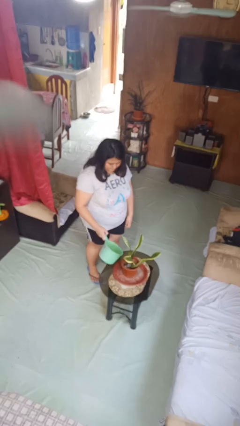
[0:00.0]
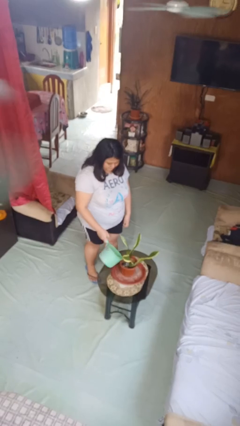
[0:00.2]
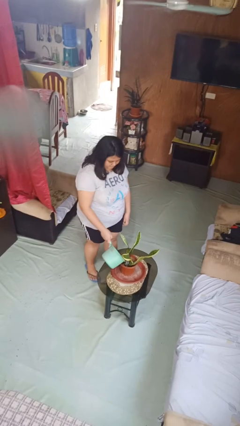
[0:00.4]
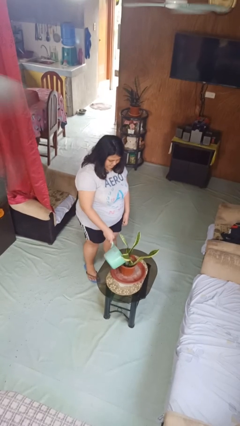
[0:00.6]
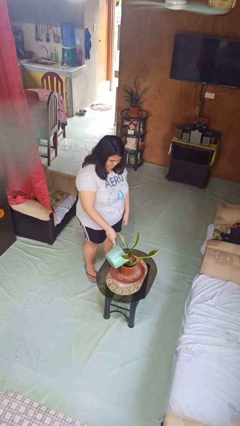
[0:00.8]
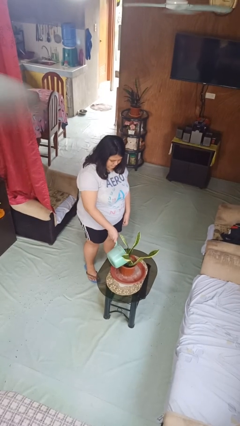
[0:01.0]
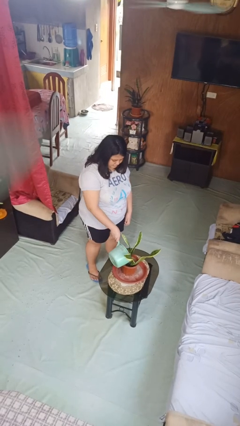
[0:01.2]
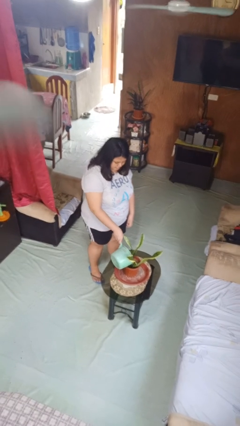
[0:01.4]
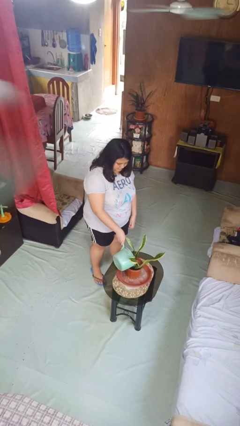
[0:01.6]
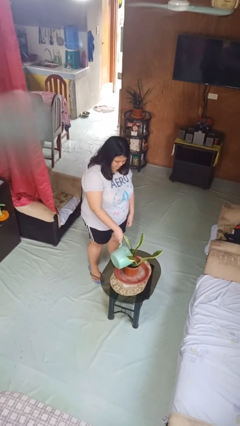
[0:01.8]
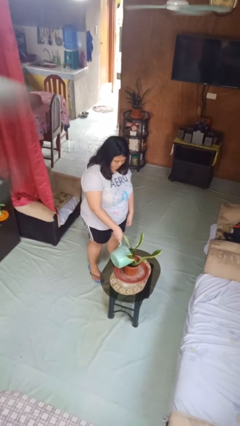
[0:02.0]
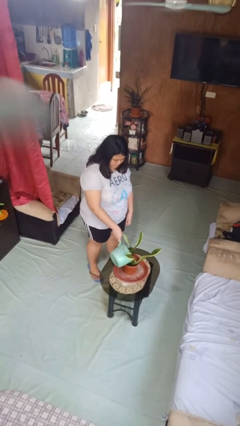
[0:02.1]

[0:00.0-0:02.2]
person waters houseplant

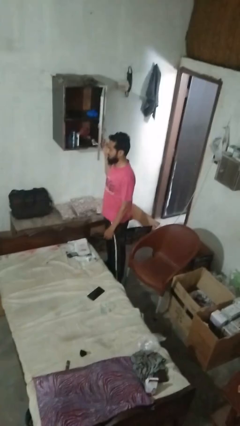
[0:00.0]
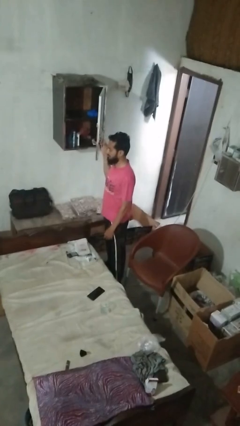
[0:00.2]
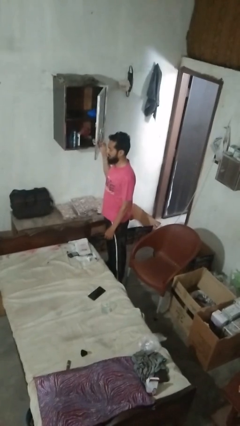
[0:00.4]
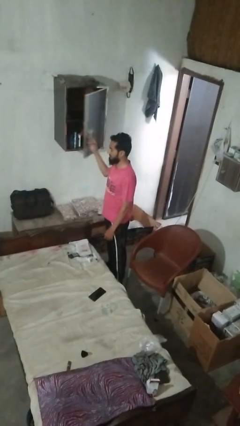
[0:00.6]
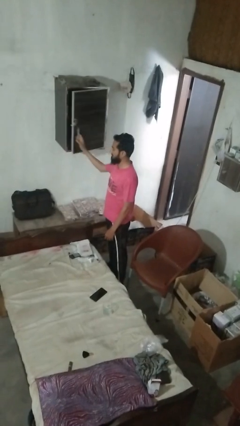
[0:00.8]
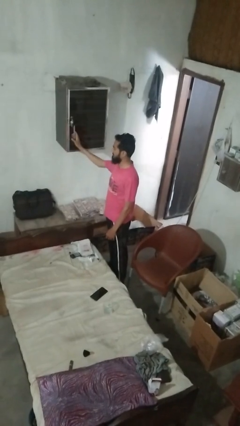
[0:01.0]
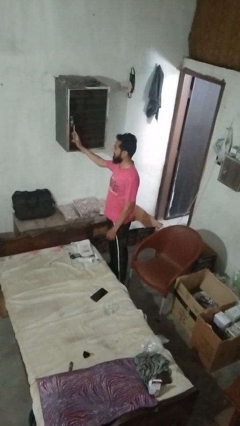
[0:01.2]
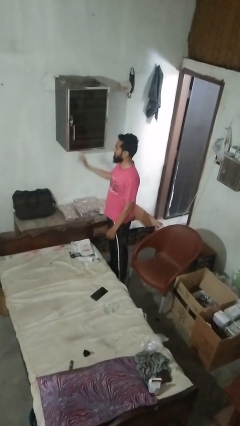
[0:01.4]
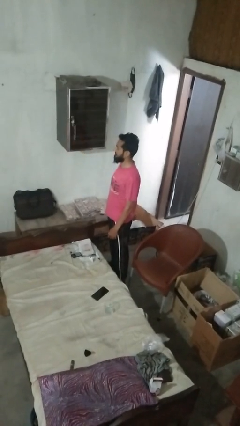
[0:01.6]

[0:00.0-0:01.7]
person closes closet door

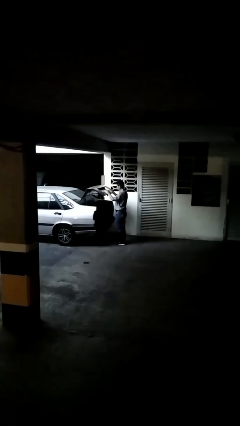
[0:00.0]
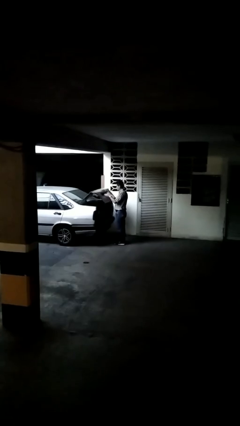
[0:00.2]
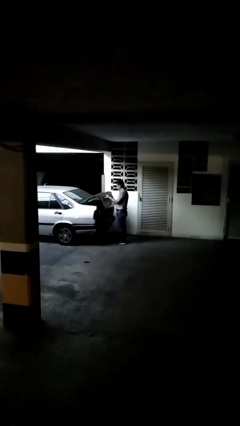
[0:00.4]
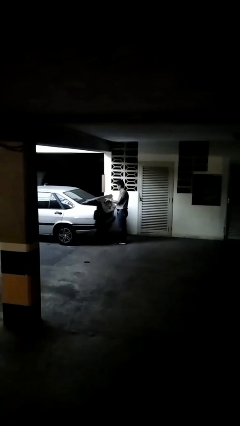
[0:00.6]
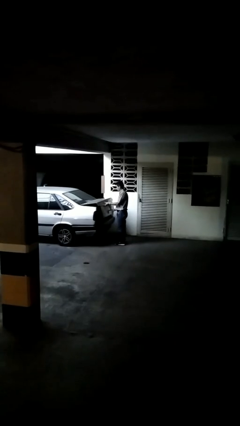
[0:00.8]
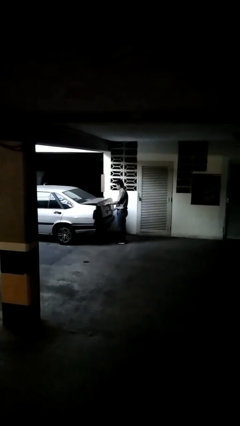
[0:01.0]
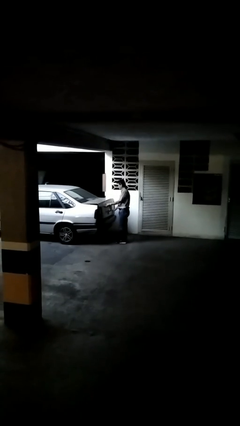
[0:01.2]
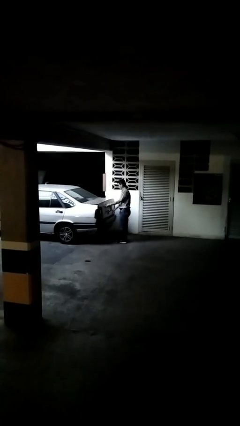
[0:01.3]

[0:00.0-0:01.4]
person closes car trunk

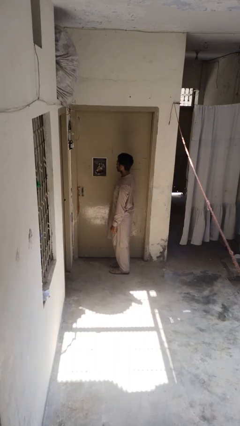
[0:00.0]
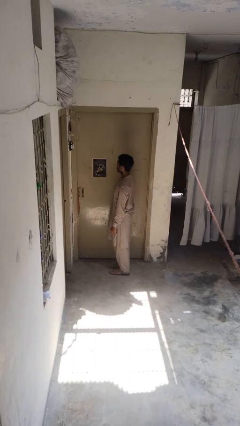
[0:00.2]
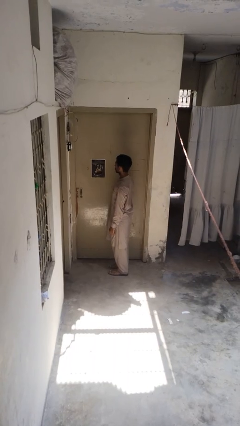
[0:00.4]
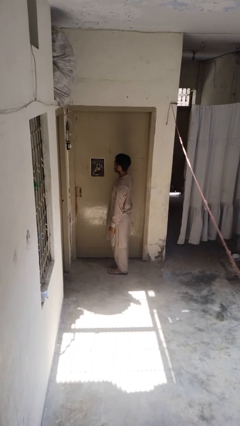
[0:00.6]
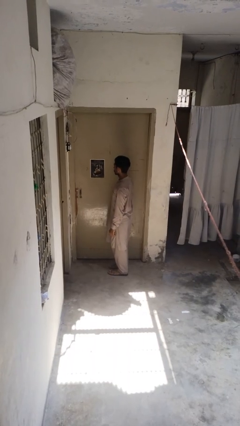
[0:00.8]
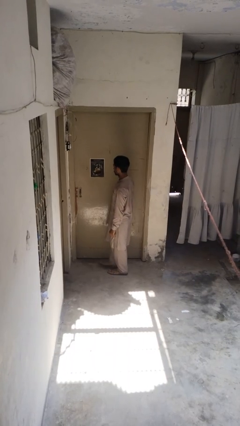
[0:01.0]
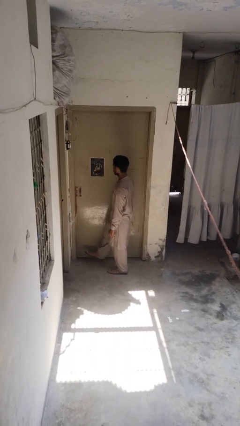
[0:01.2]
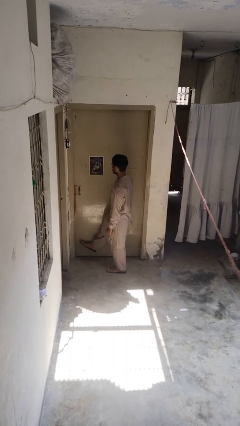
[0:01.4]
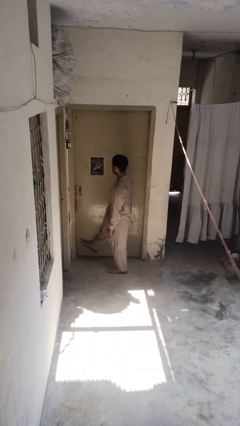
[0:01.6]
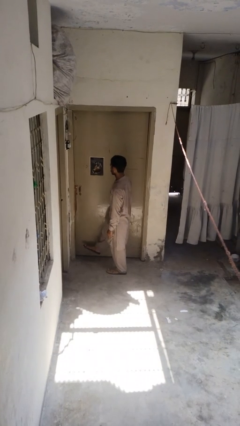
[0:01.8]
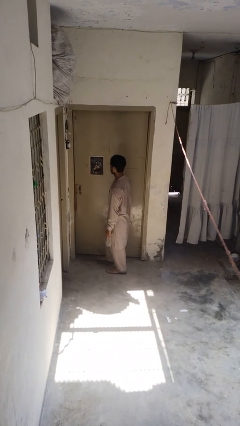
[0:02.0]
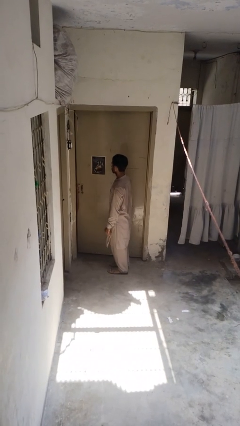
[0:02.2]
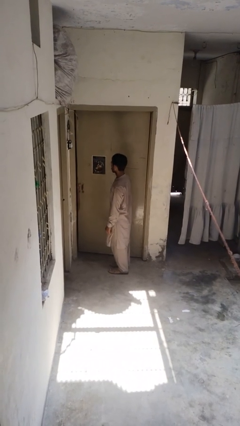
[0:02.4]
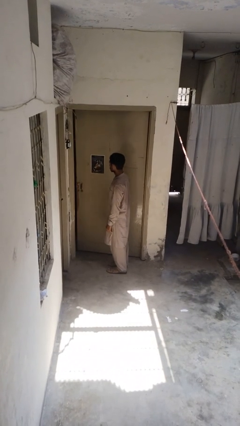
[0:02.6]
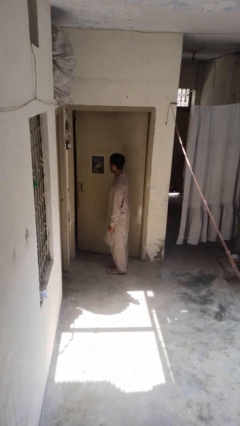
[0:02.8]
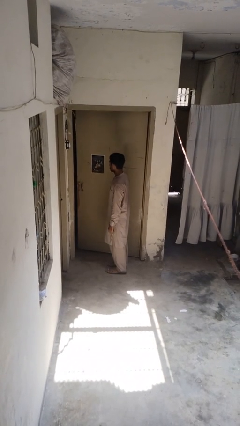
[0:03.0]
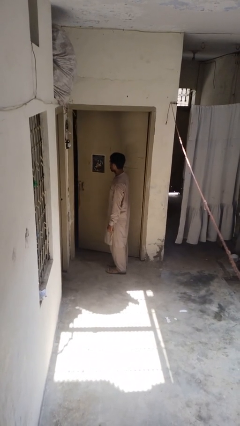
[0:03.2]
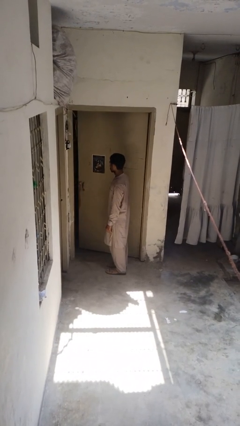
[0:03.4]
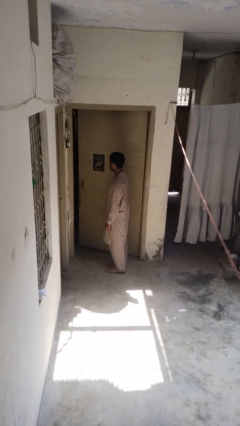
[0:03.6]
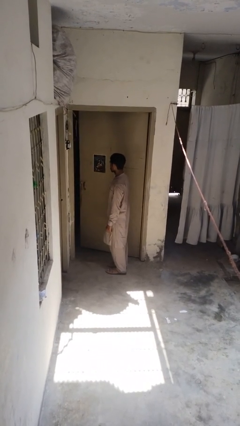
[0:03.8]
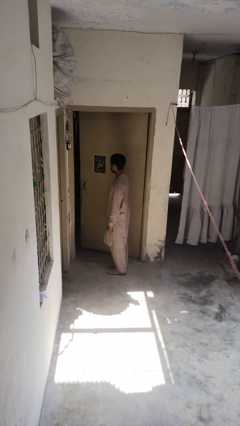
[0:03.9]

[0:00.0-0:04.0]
person opens facility door

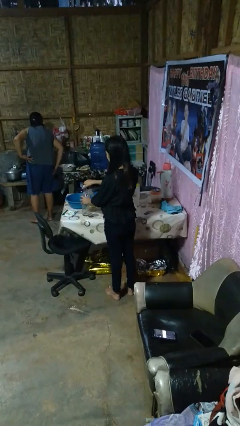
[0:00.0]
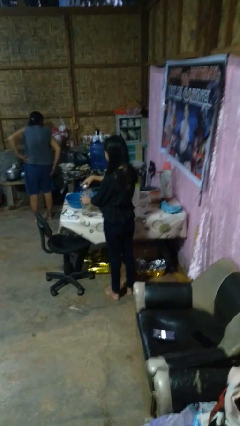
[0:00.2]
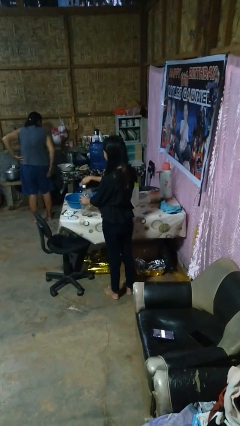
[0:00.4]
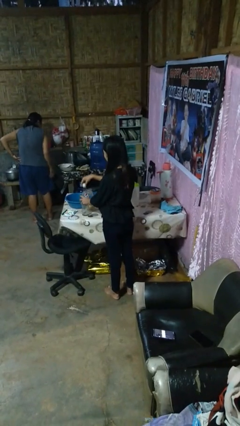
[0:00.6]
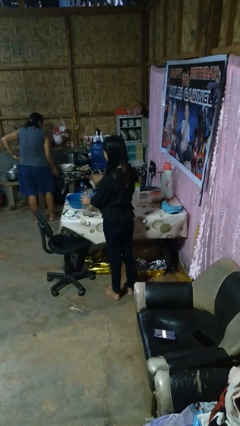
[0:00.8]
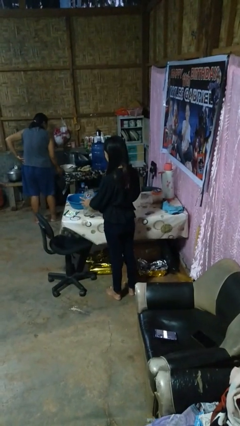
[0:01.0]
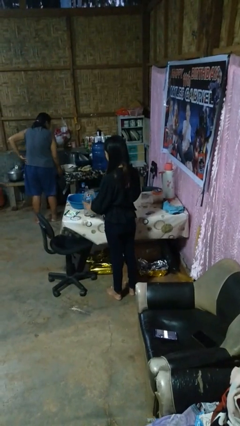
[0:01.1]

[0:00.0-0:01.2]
person unscrews lid from bottle

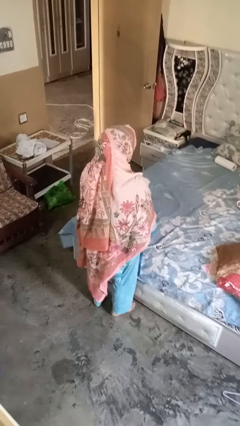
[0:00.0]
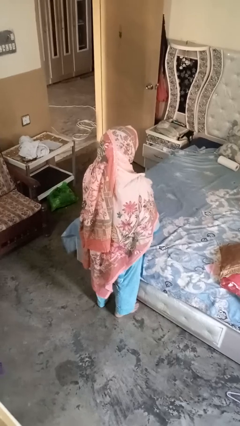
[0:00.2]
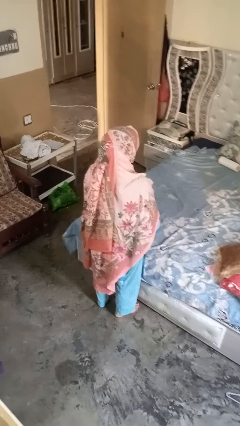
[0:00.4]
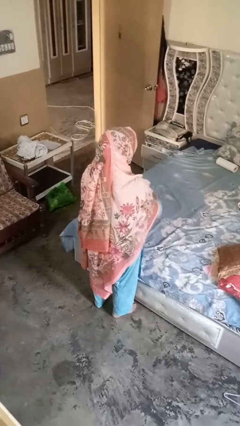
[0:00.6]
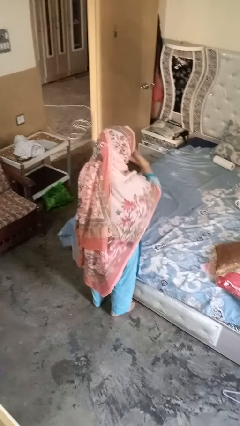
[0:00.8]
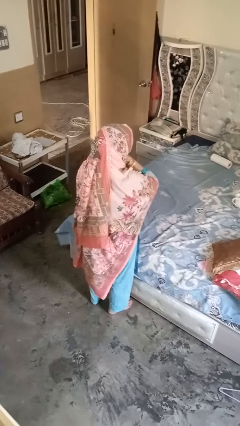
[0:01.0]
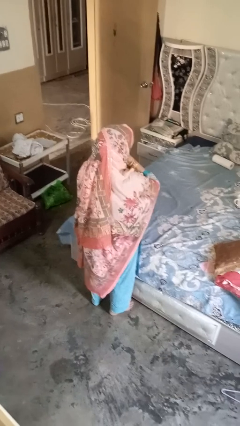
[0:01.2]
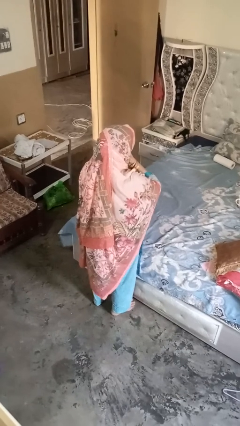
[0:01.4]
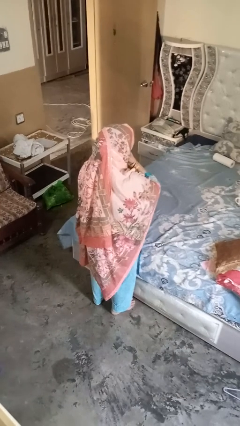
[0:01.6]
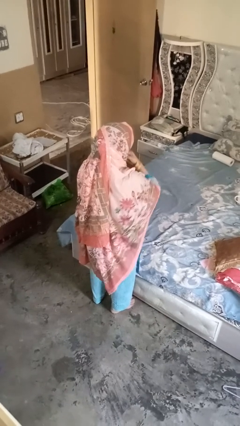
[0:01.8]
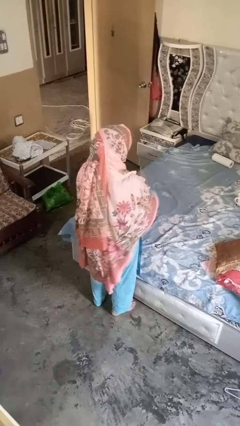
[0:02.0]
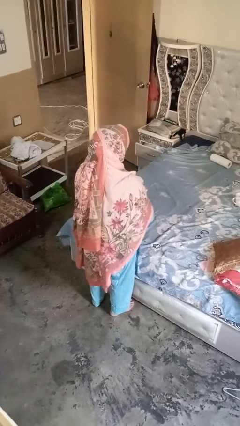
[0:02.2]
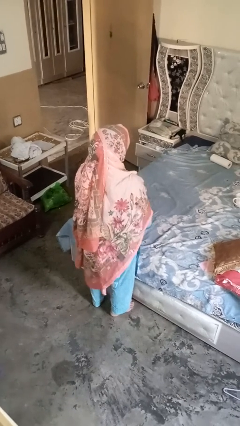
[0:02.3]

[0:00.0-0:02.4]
person strokes chin

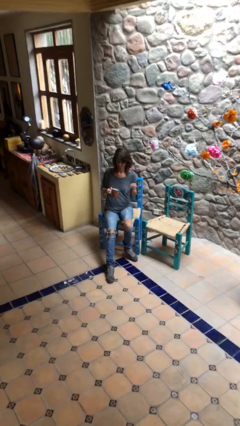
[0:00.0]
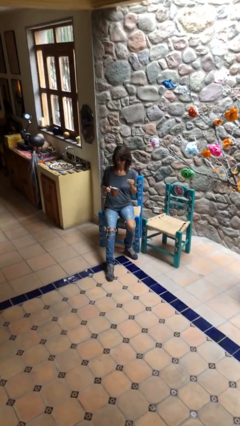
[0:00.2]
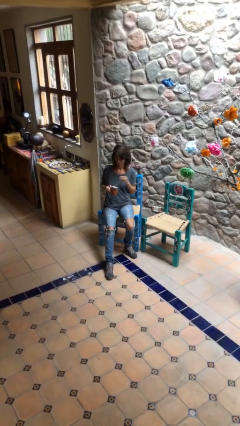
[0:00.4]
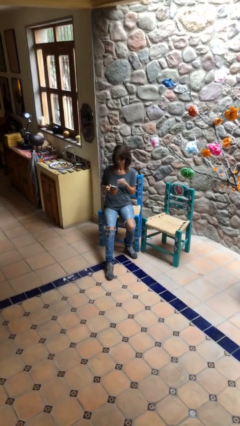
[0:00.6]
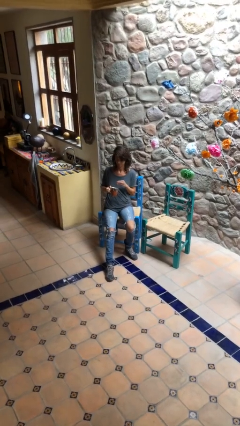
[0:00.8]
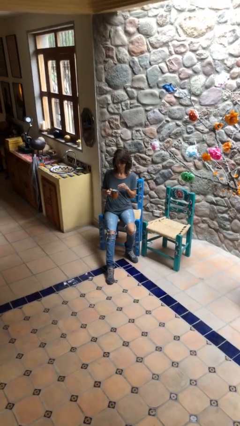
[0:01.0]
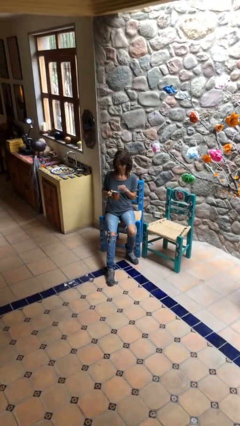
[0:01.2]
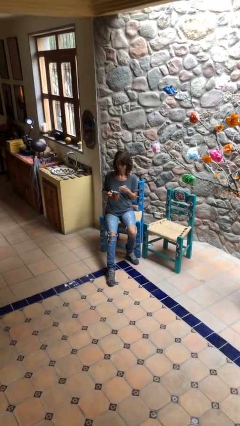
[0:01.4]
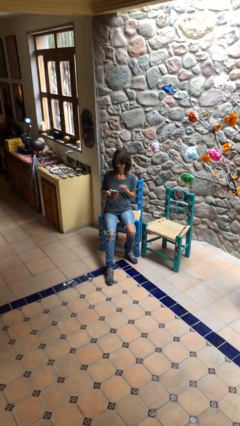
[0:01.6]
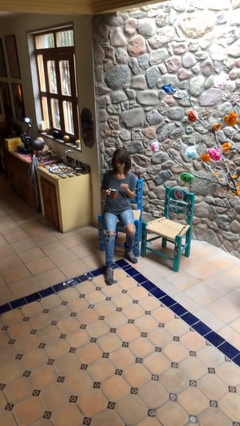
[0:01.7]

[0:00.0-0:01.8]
person stirs mug

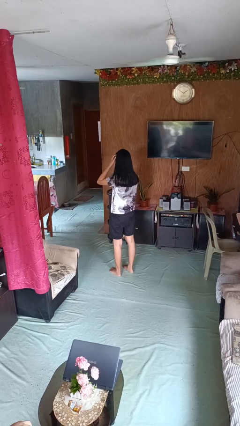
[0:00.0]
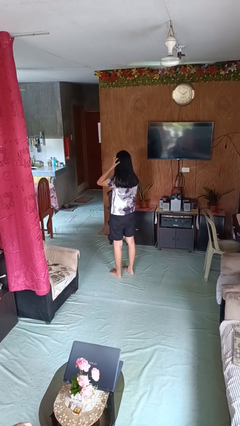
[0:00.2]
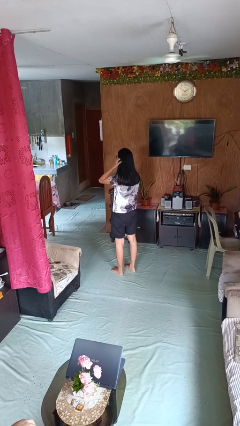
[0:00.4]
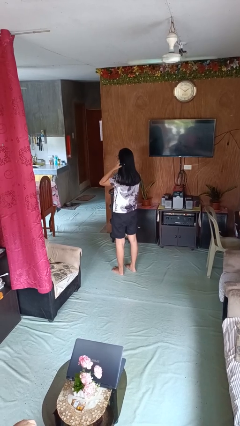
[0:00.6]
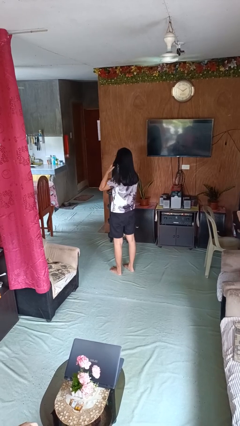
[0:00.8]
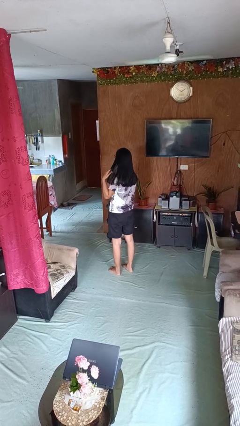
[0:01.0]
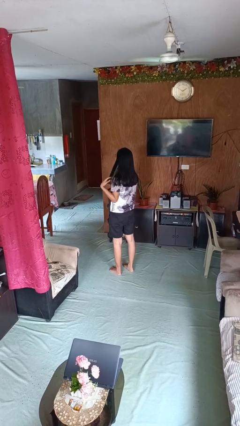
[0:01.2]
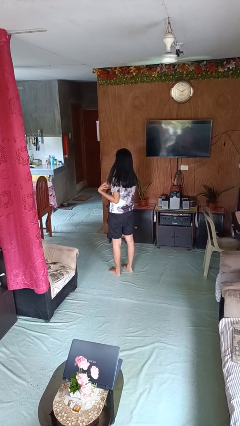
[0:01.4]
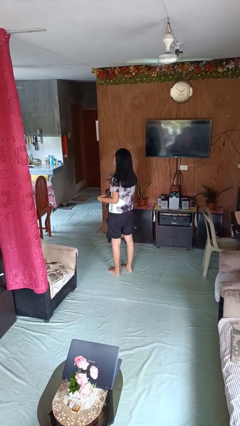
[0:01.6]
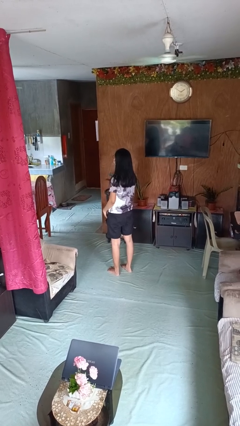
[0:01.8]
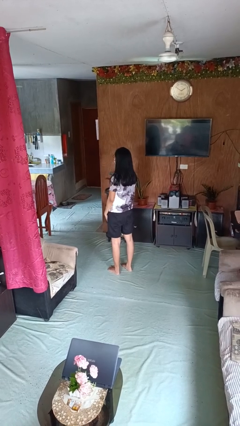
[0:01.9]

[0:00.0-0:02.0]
person strokes hair
